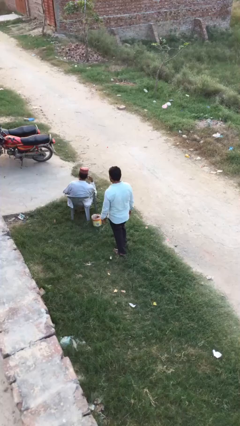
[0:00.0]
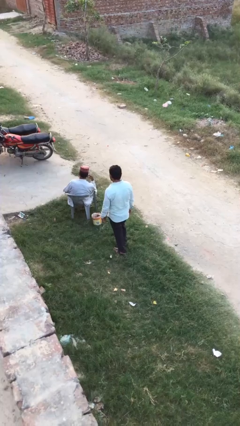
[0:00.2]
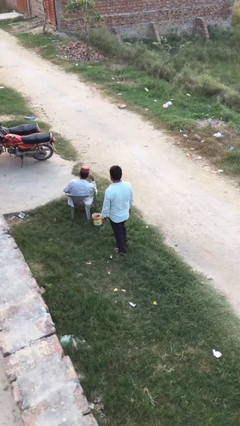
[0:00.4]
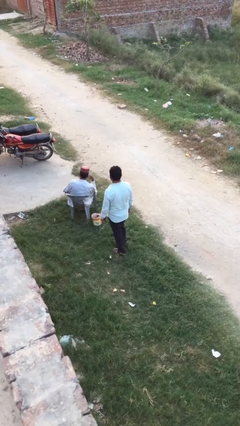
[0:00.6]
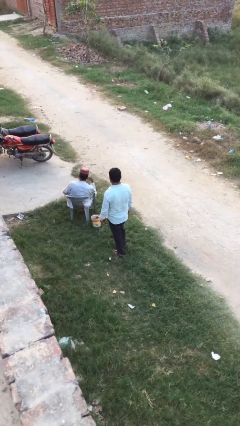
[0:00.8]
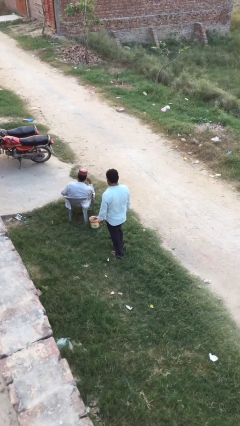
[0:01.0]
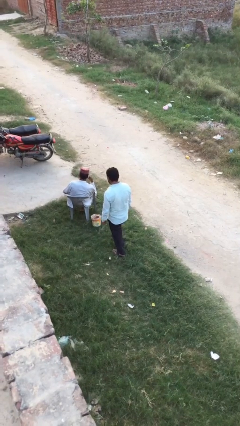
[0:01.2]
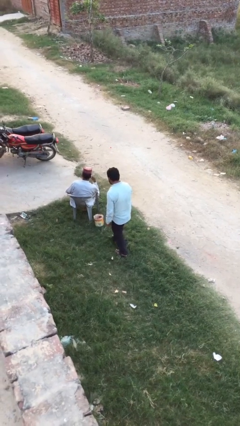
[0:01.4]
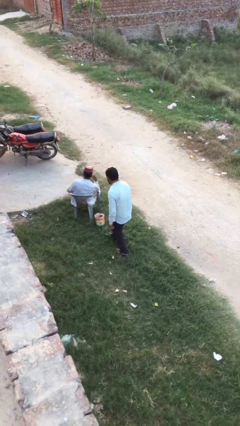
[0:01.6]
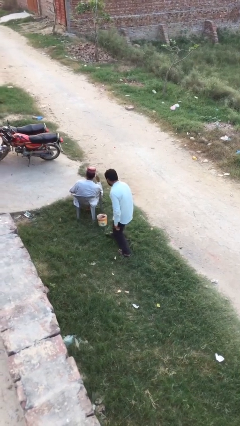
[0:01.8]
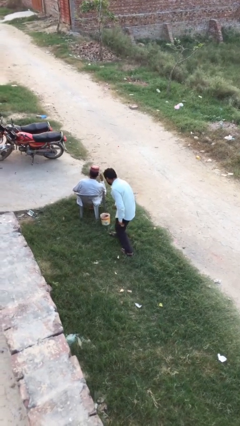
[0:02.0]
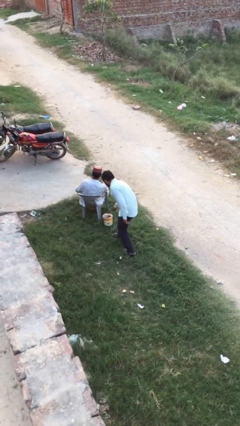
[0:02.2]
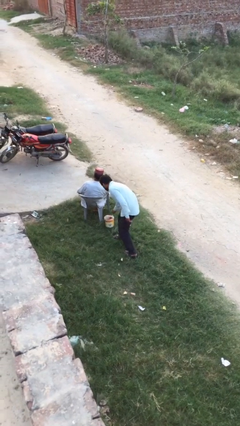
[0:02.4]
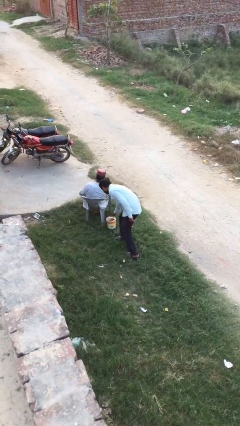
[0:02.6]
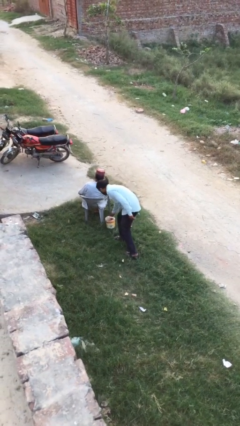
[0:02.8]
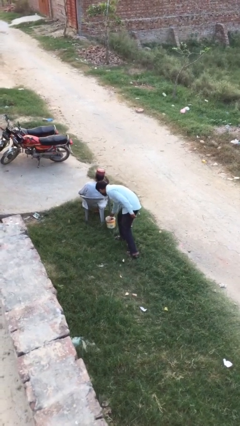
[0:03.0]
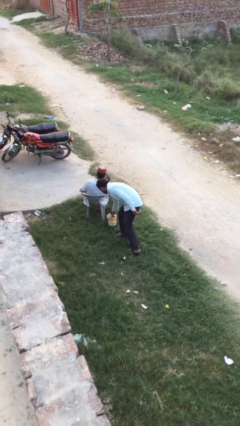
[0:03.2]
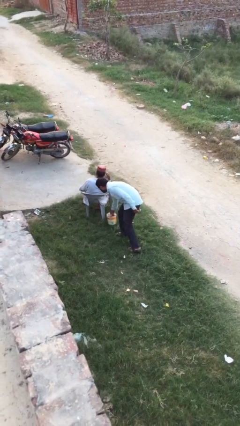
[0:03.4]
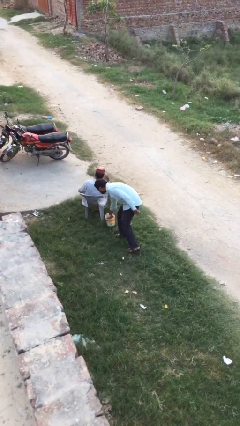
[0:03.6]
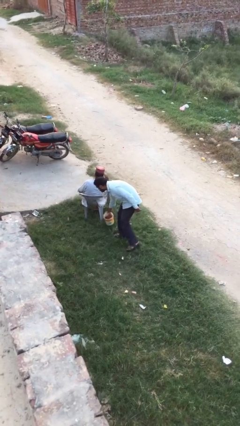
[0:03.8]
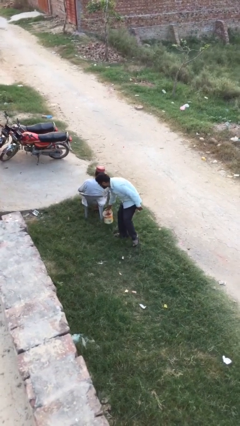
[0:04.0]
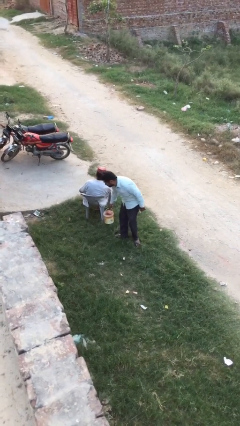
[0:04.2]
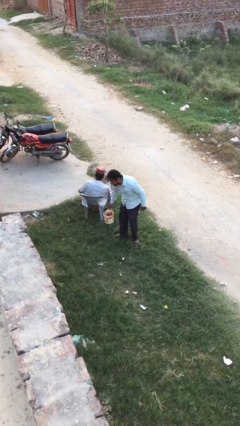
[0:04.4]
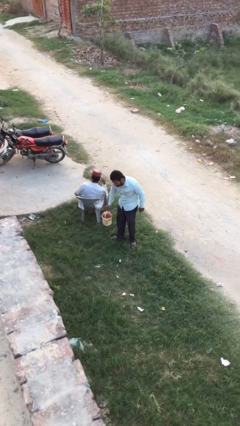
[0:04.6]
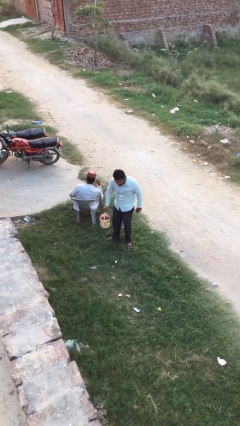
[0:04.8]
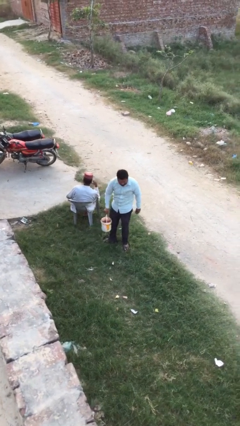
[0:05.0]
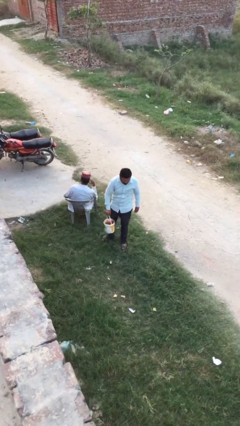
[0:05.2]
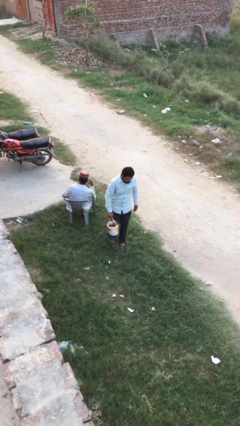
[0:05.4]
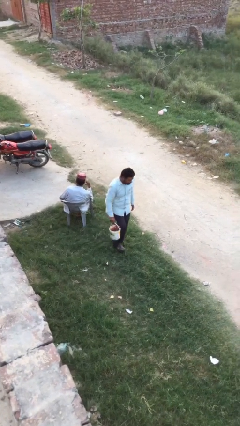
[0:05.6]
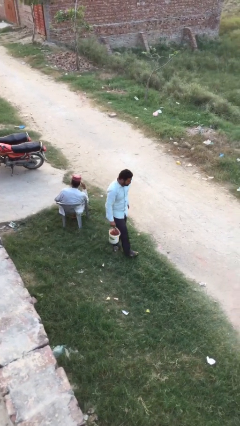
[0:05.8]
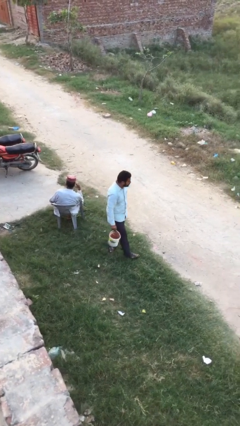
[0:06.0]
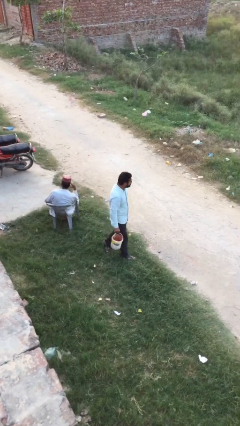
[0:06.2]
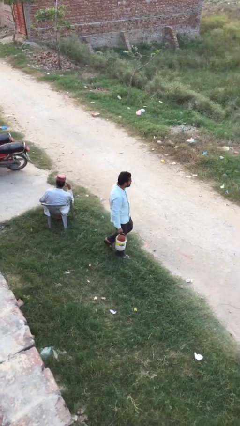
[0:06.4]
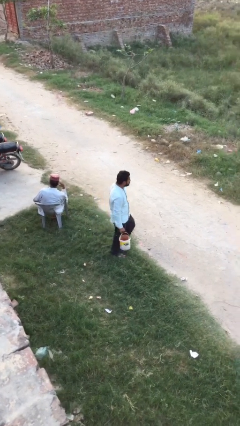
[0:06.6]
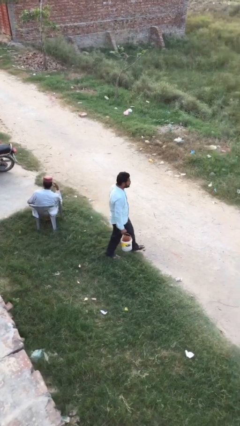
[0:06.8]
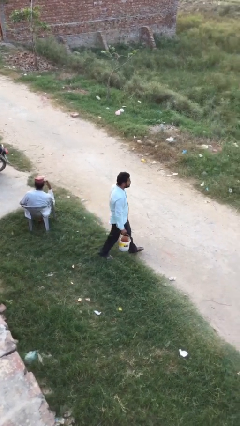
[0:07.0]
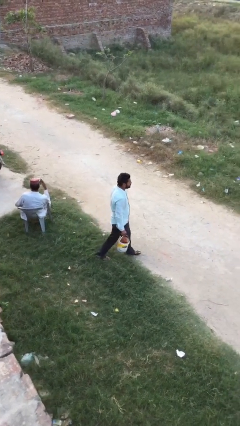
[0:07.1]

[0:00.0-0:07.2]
person steals object from person

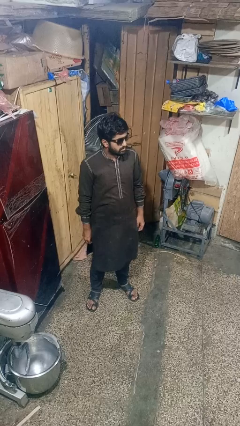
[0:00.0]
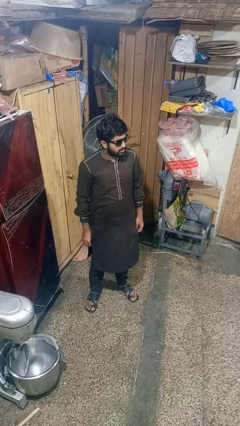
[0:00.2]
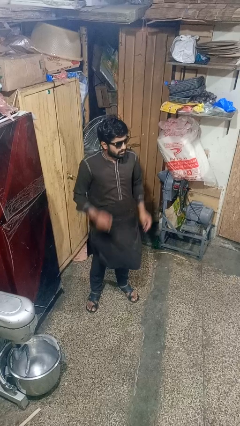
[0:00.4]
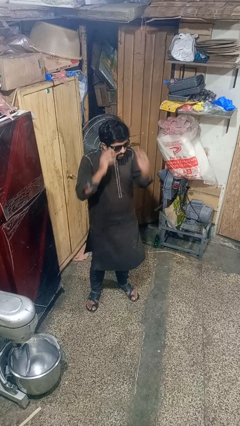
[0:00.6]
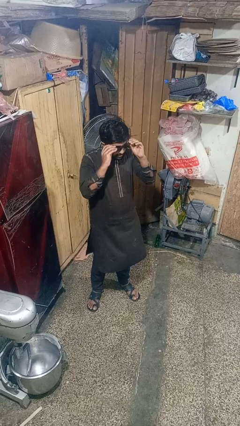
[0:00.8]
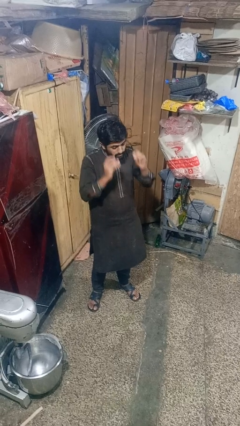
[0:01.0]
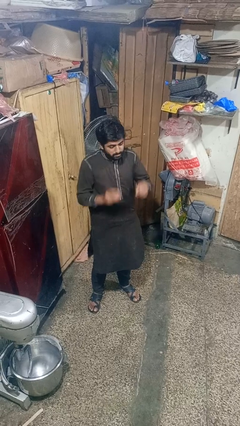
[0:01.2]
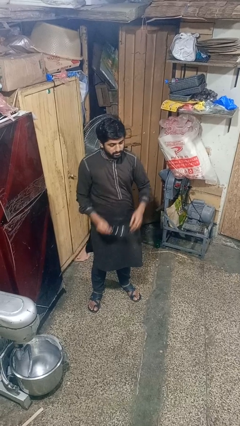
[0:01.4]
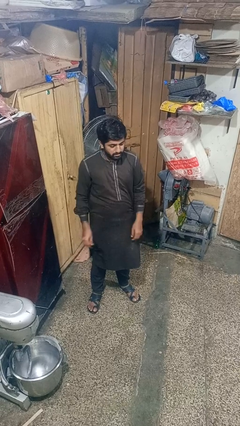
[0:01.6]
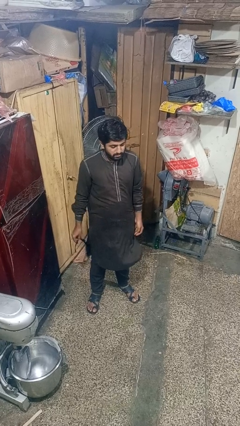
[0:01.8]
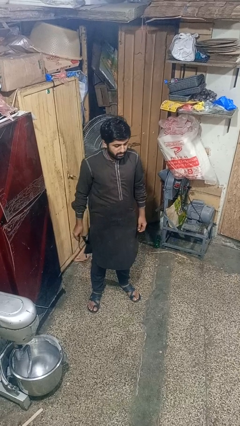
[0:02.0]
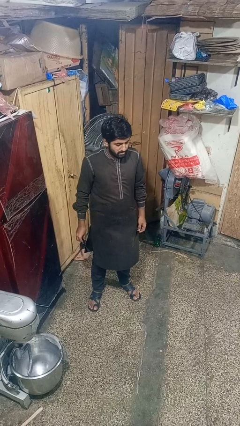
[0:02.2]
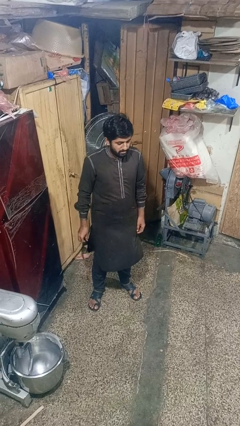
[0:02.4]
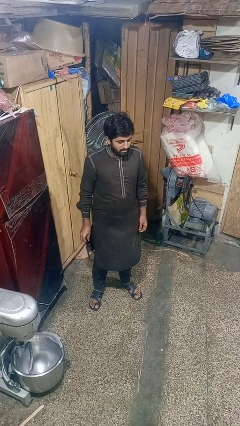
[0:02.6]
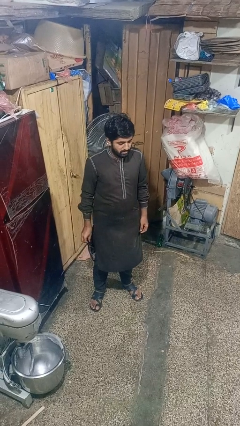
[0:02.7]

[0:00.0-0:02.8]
person takes off sunglasses

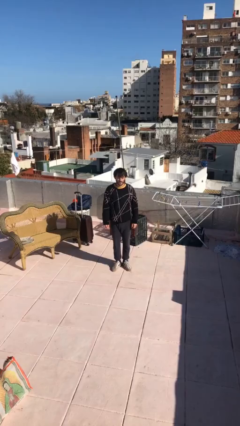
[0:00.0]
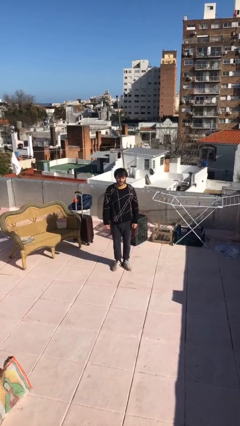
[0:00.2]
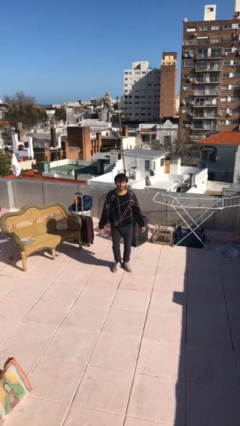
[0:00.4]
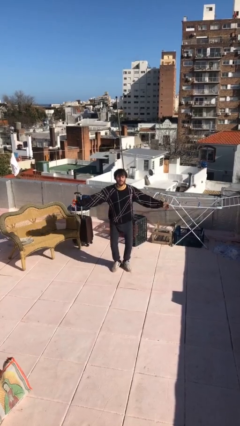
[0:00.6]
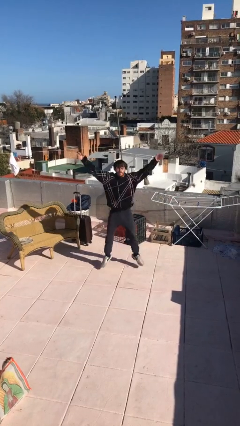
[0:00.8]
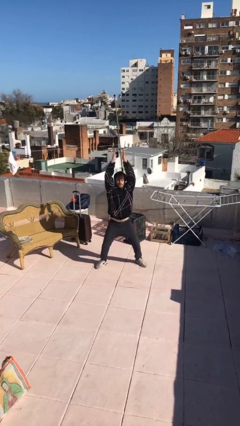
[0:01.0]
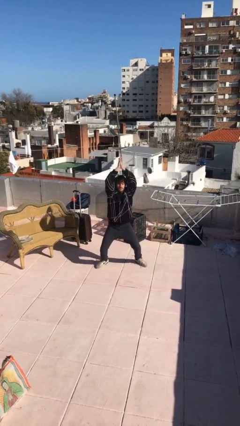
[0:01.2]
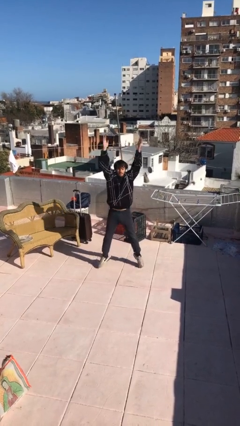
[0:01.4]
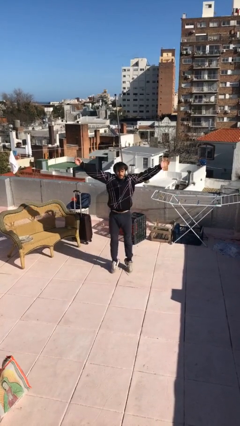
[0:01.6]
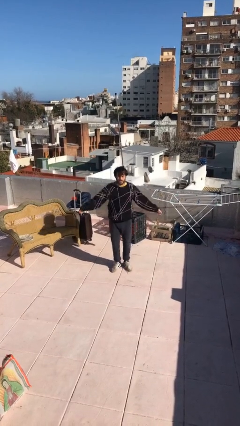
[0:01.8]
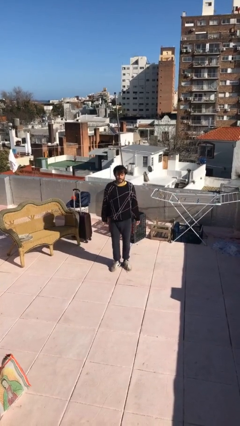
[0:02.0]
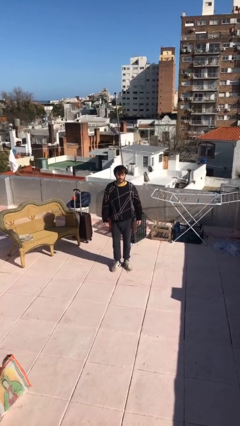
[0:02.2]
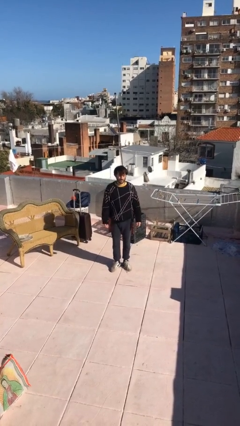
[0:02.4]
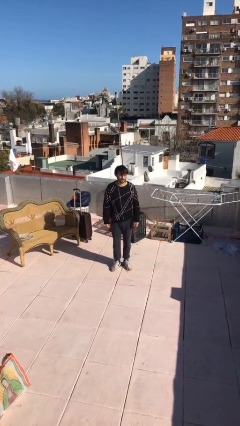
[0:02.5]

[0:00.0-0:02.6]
person exercises with jumping jacks

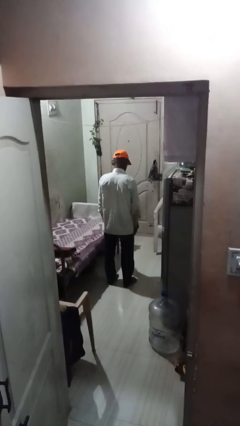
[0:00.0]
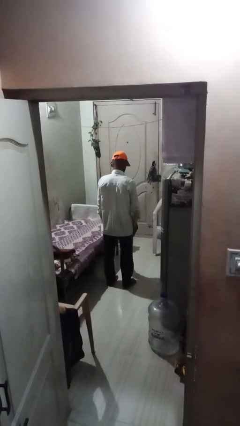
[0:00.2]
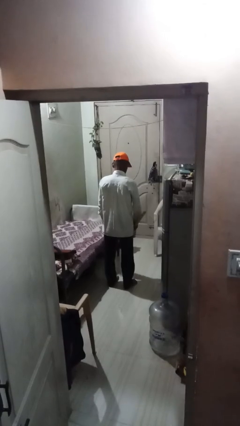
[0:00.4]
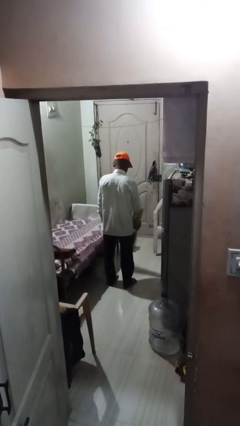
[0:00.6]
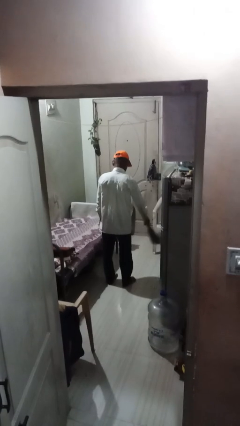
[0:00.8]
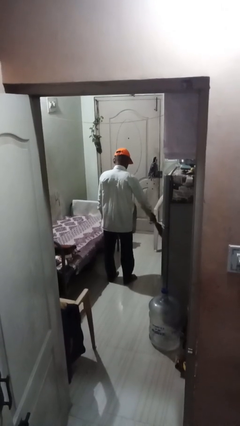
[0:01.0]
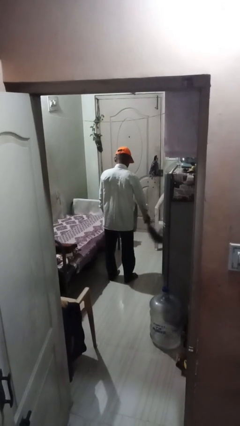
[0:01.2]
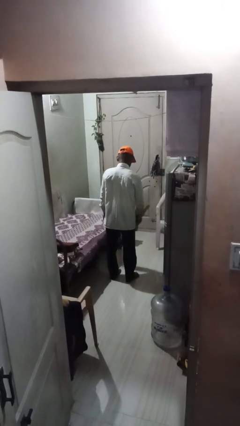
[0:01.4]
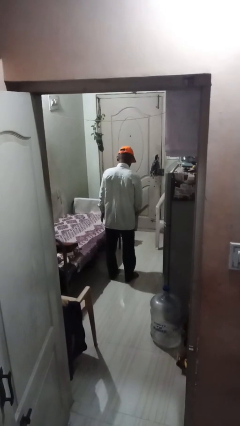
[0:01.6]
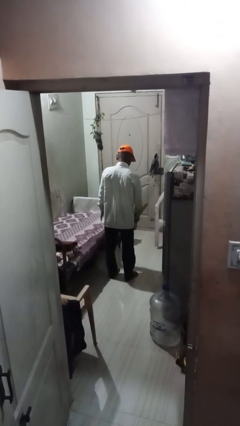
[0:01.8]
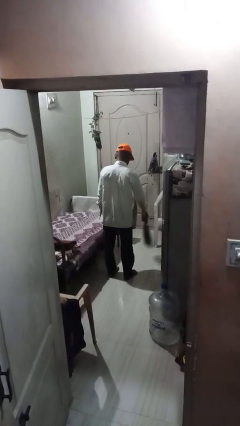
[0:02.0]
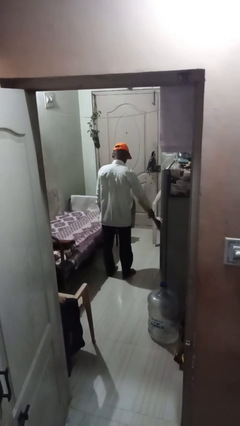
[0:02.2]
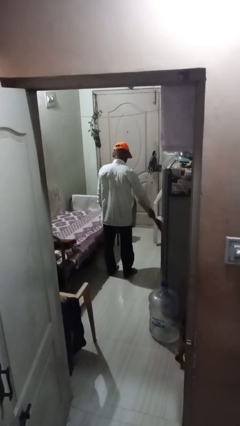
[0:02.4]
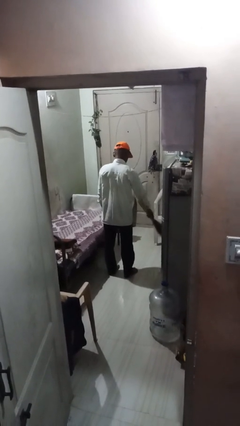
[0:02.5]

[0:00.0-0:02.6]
person mops

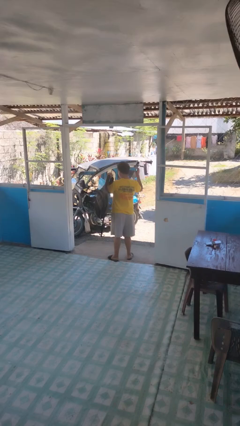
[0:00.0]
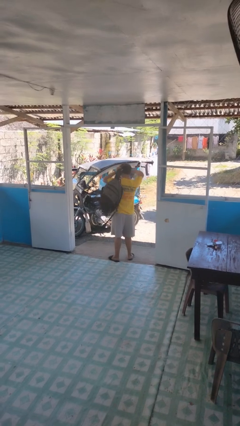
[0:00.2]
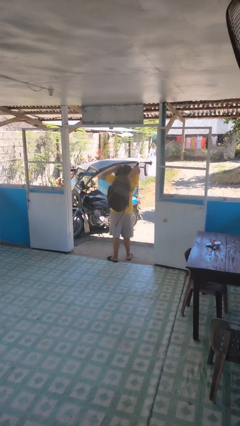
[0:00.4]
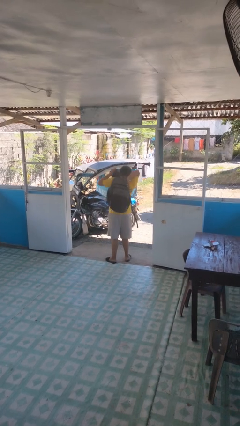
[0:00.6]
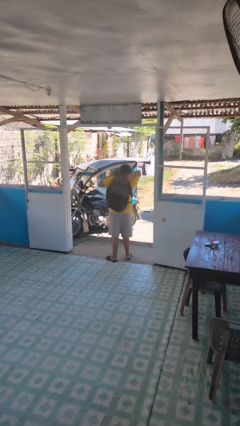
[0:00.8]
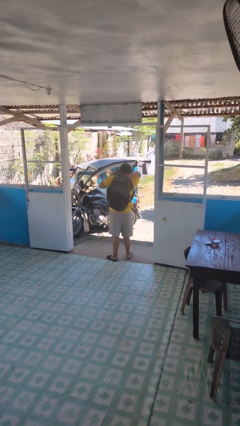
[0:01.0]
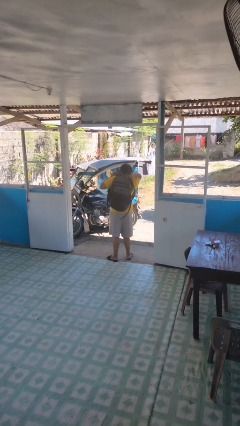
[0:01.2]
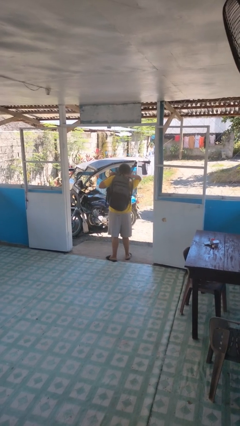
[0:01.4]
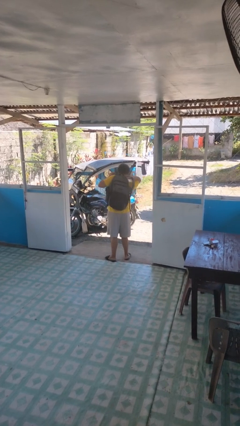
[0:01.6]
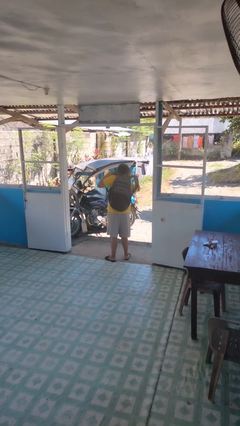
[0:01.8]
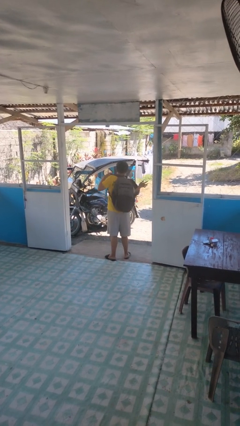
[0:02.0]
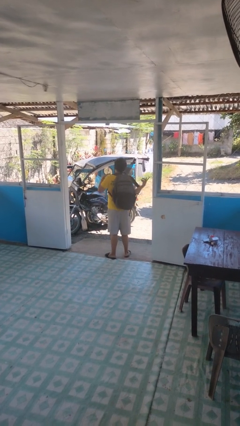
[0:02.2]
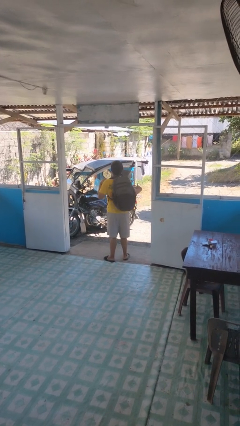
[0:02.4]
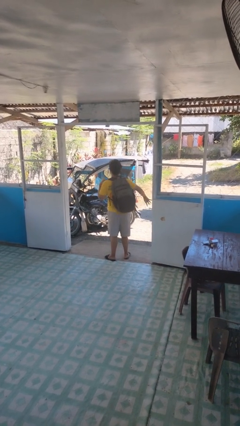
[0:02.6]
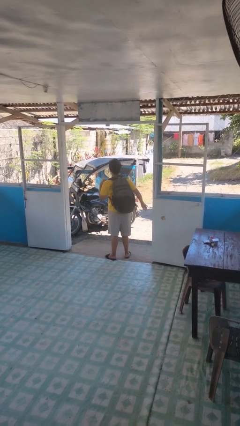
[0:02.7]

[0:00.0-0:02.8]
person puts on backpack
